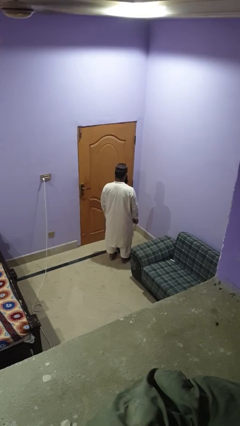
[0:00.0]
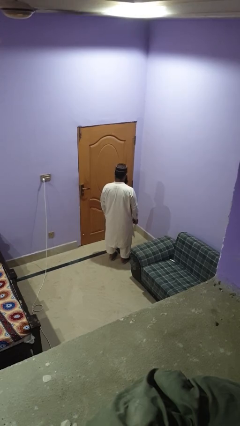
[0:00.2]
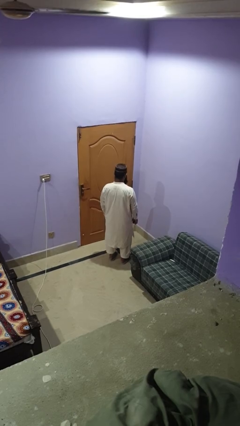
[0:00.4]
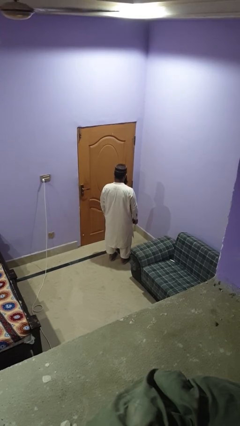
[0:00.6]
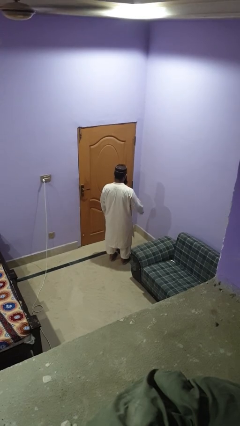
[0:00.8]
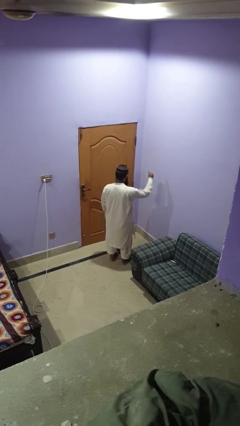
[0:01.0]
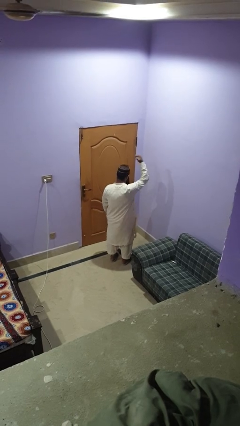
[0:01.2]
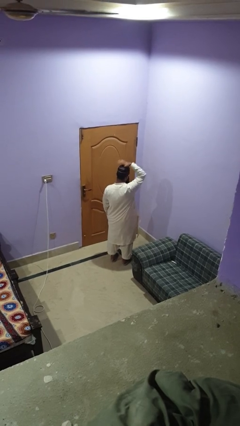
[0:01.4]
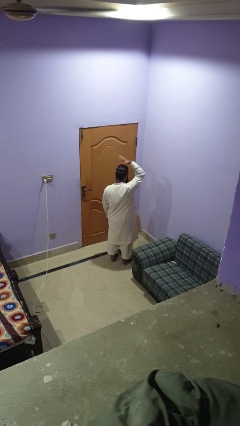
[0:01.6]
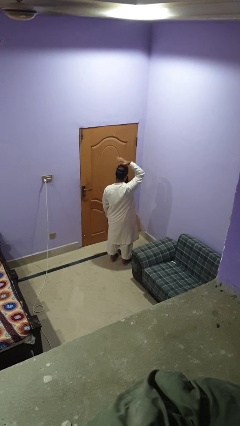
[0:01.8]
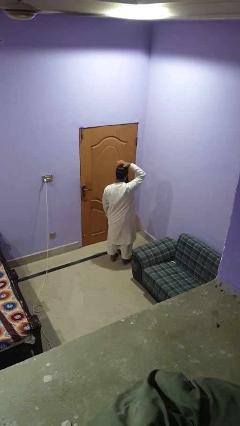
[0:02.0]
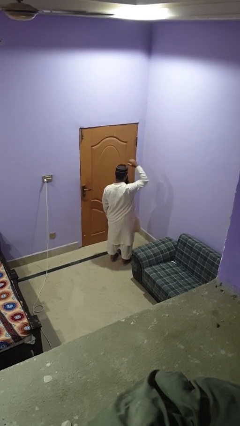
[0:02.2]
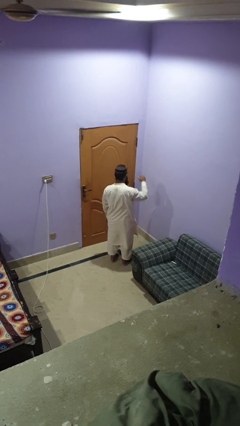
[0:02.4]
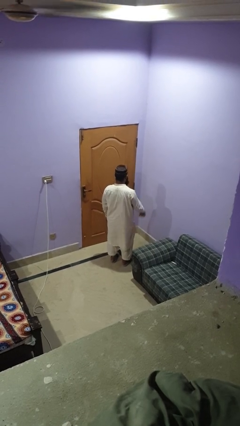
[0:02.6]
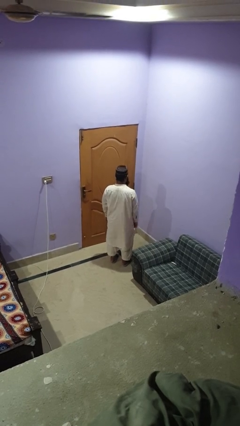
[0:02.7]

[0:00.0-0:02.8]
person pats head

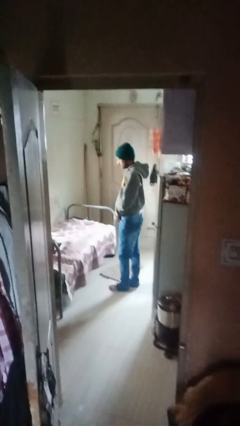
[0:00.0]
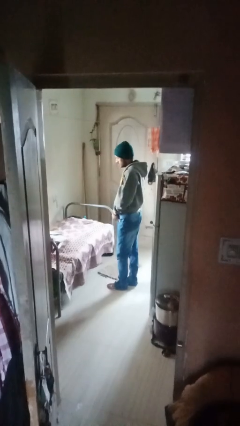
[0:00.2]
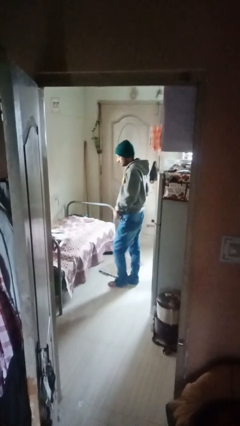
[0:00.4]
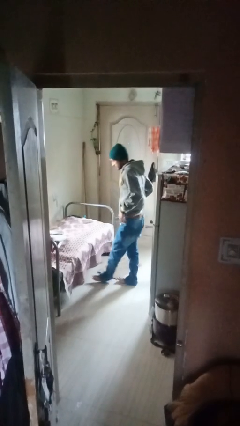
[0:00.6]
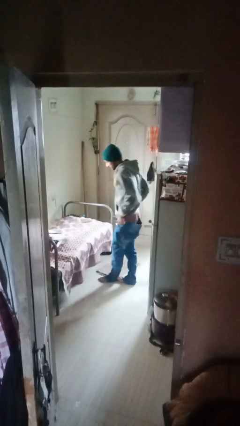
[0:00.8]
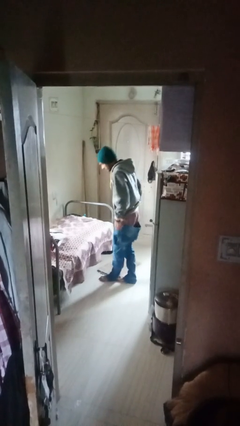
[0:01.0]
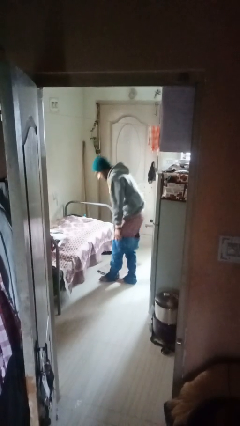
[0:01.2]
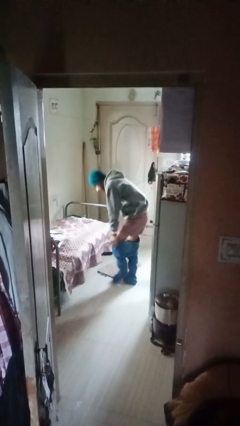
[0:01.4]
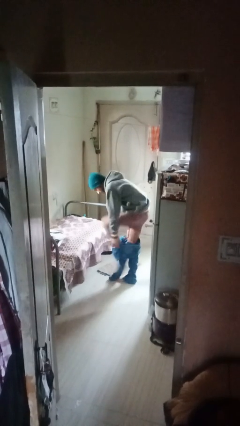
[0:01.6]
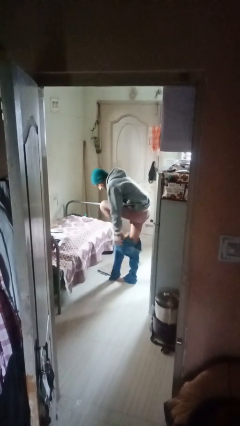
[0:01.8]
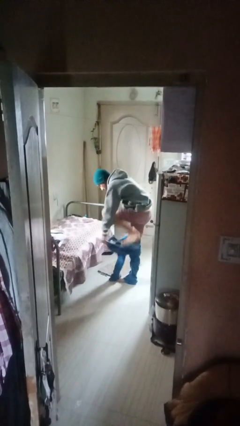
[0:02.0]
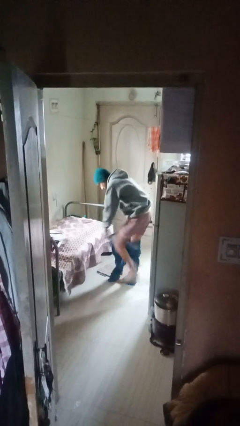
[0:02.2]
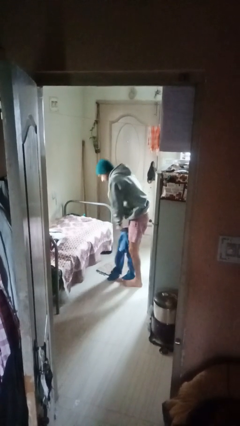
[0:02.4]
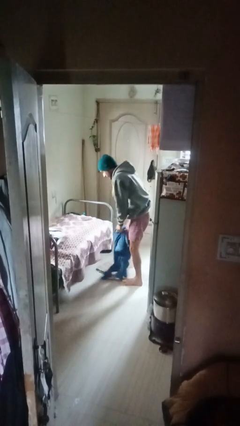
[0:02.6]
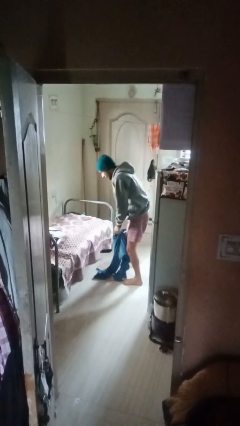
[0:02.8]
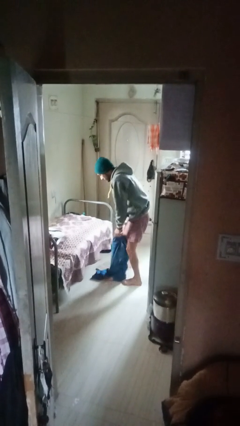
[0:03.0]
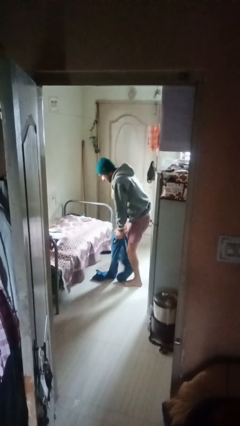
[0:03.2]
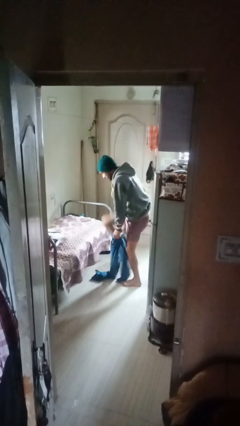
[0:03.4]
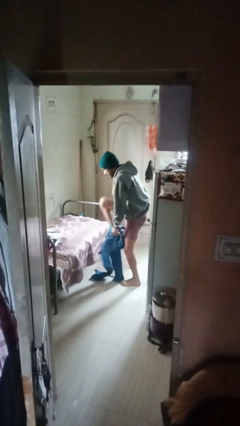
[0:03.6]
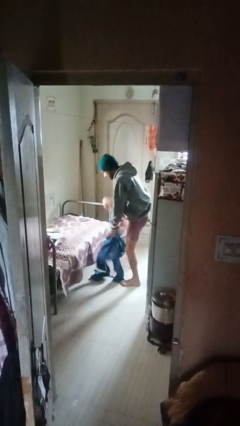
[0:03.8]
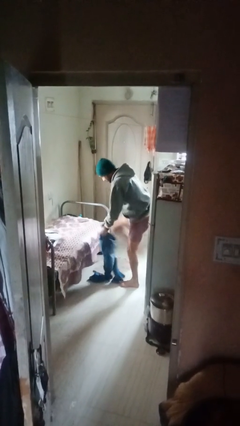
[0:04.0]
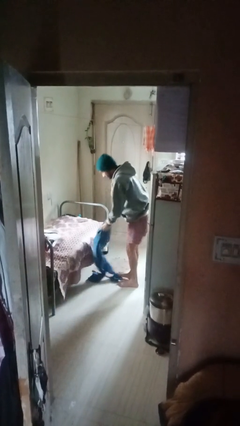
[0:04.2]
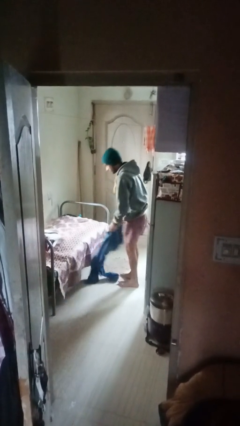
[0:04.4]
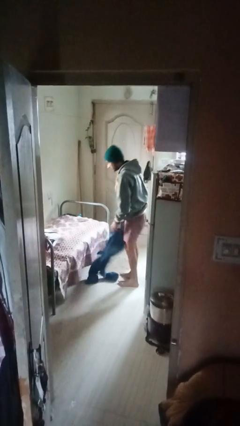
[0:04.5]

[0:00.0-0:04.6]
person takes off pants

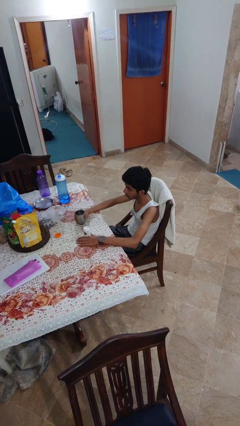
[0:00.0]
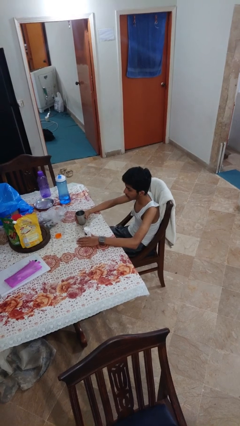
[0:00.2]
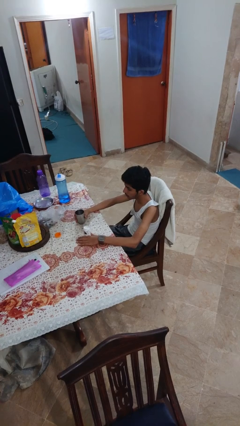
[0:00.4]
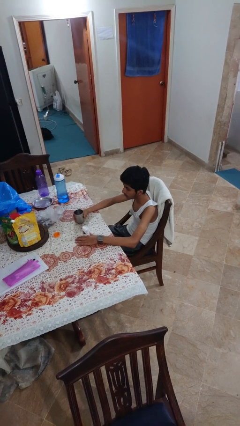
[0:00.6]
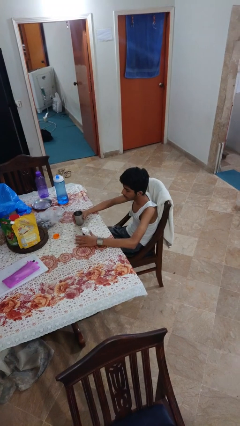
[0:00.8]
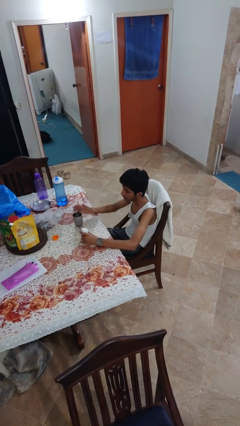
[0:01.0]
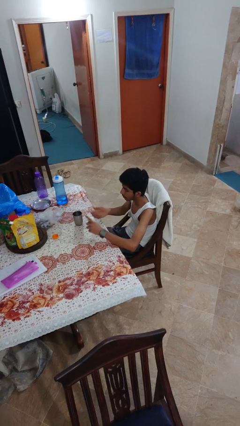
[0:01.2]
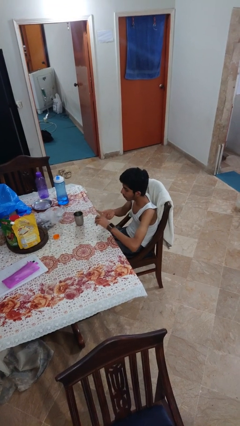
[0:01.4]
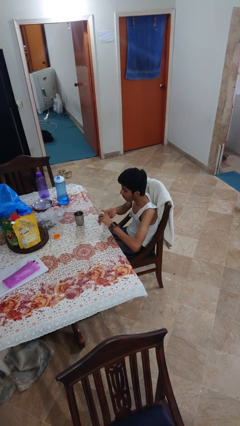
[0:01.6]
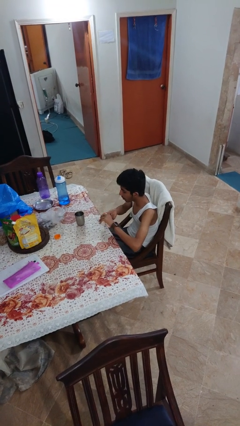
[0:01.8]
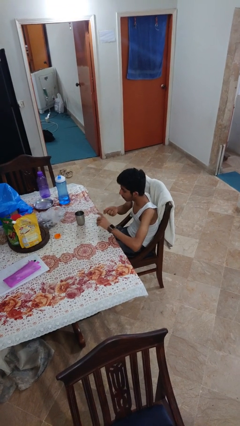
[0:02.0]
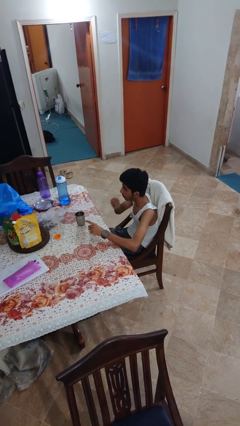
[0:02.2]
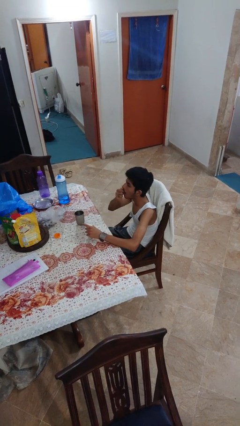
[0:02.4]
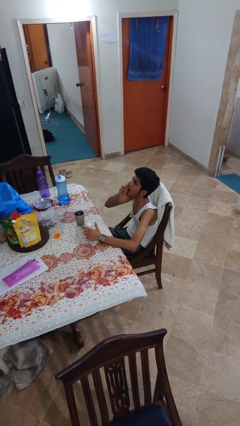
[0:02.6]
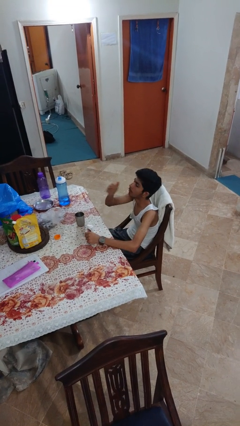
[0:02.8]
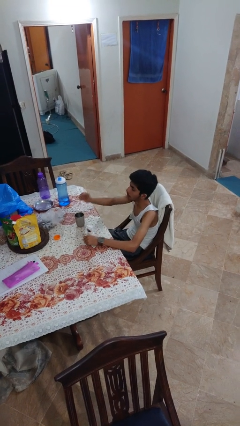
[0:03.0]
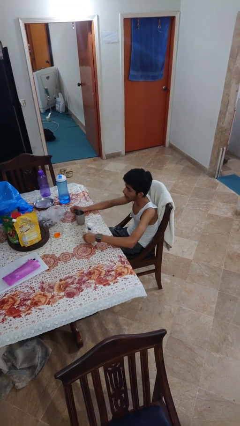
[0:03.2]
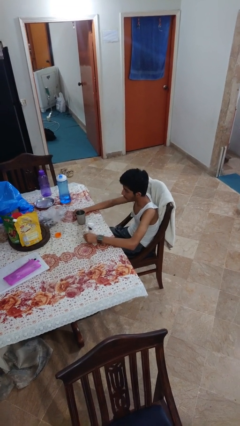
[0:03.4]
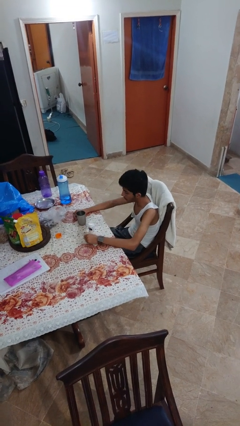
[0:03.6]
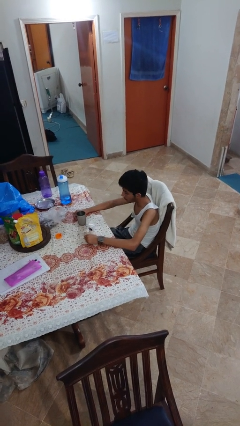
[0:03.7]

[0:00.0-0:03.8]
person takes medicine pills

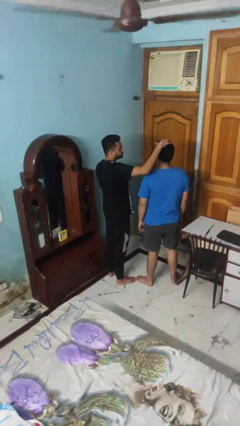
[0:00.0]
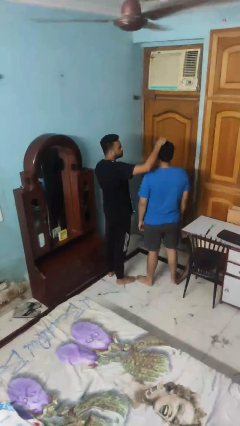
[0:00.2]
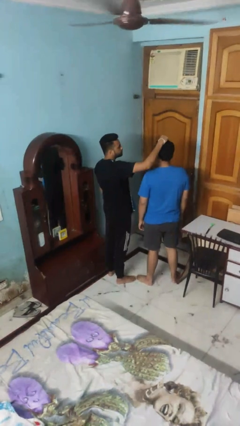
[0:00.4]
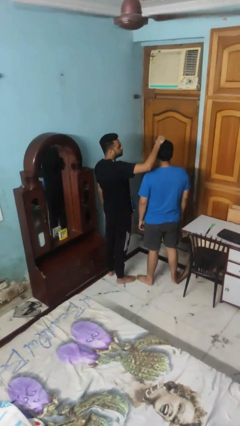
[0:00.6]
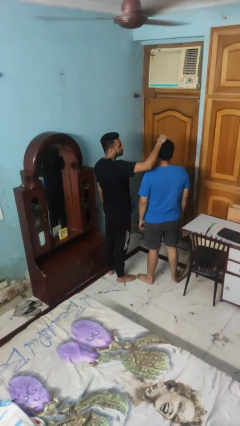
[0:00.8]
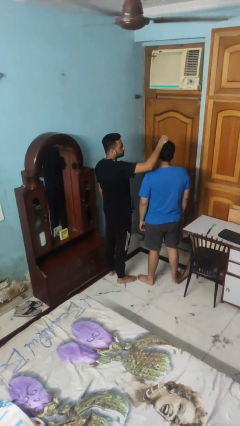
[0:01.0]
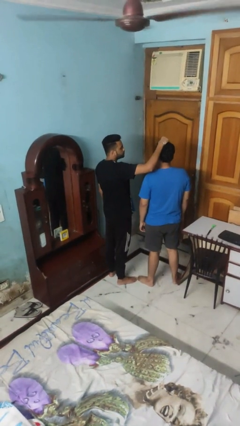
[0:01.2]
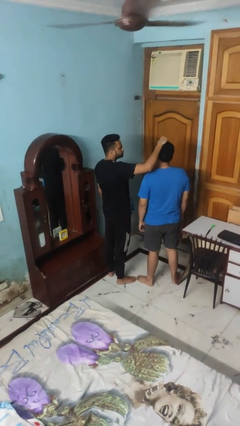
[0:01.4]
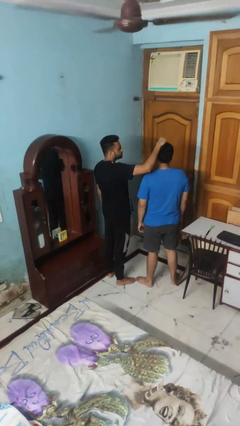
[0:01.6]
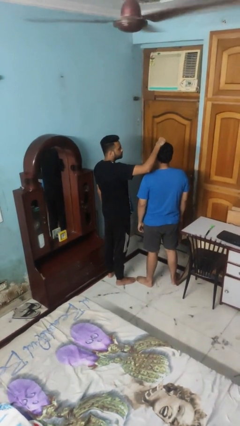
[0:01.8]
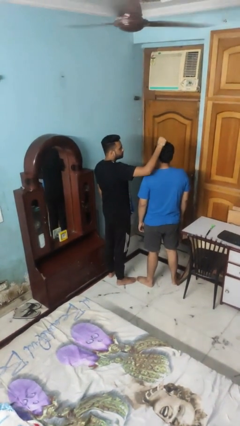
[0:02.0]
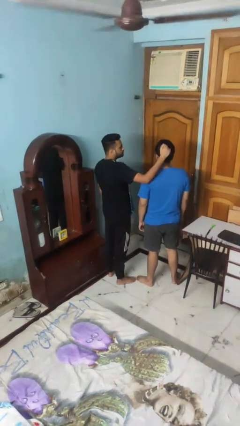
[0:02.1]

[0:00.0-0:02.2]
person grabs person by hair

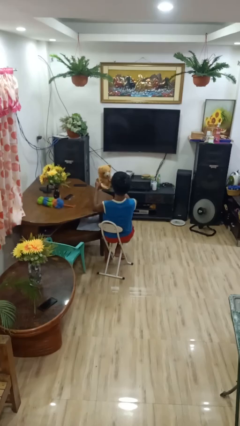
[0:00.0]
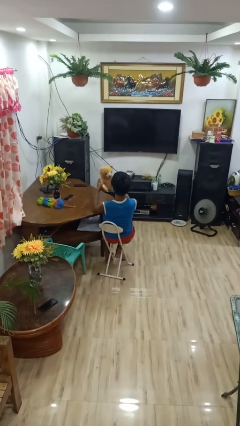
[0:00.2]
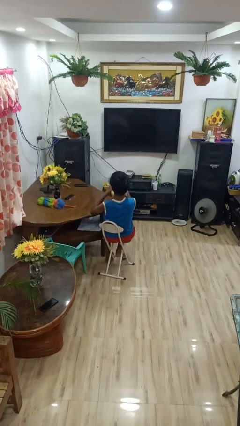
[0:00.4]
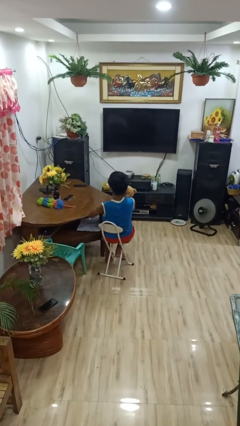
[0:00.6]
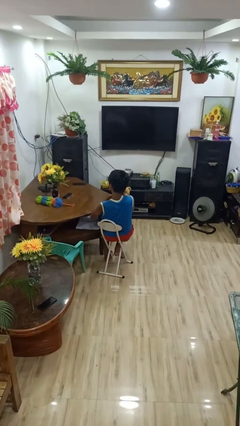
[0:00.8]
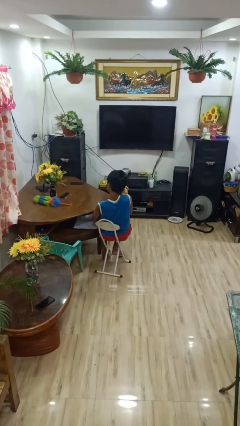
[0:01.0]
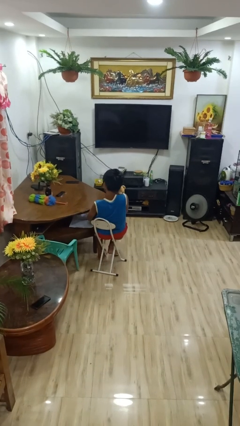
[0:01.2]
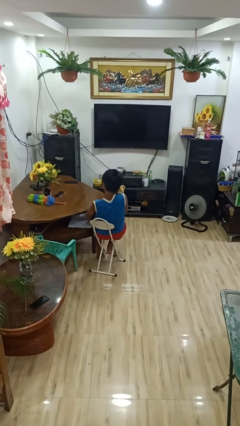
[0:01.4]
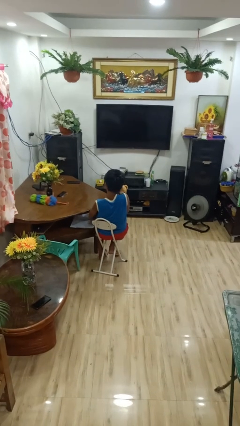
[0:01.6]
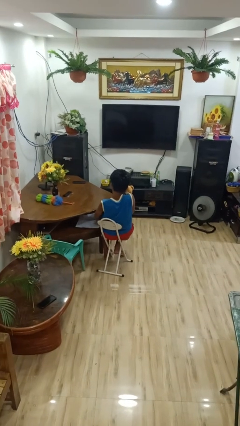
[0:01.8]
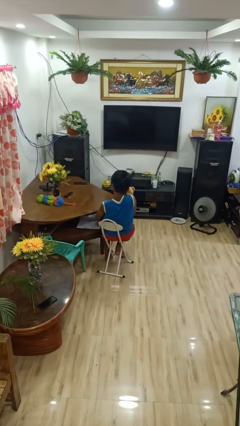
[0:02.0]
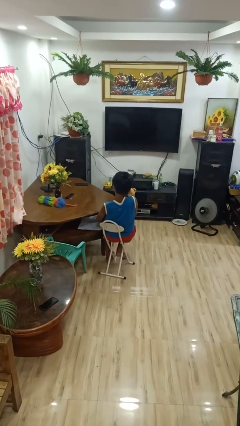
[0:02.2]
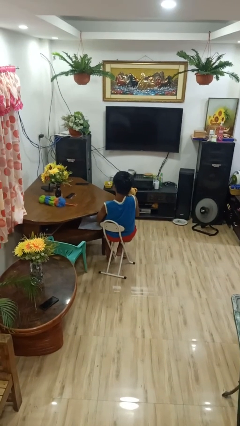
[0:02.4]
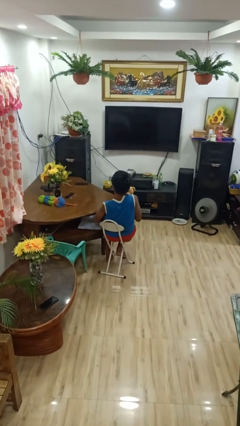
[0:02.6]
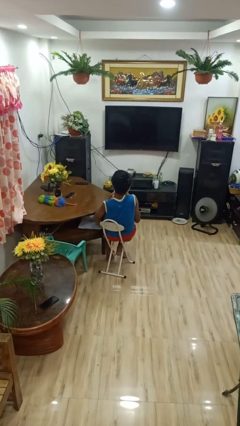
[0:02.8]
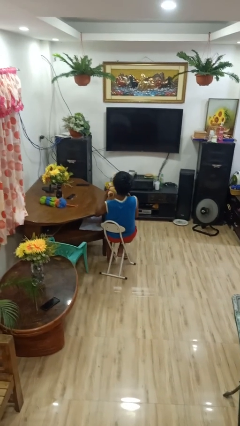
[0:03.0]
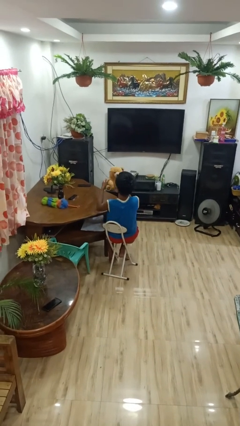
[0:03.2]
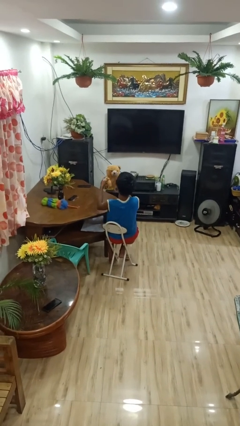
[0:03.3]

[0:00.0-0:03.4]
person hugs stuffed animal

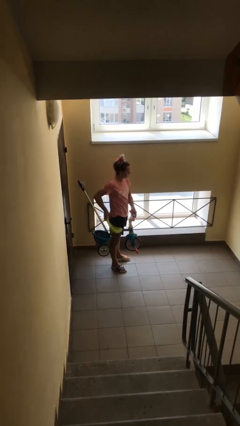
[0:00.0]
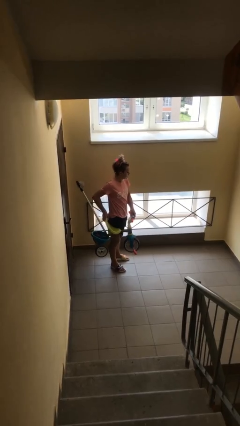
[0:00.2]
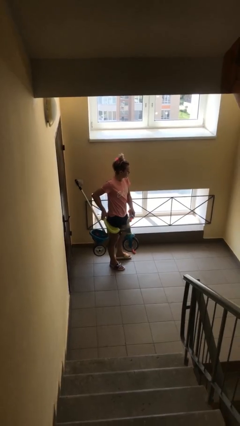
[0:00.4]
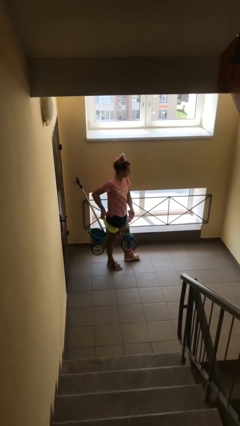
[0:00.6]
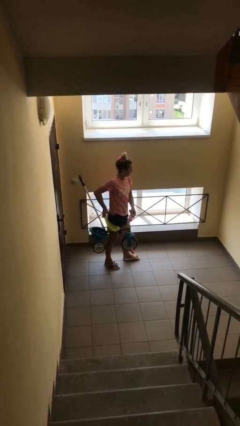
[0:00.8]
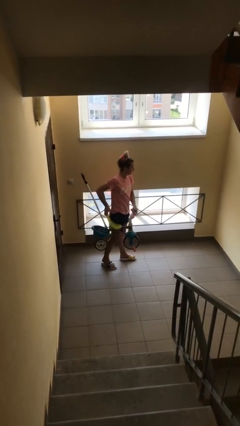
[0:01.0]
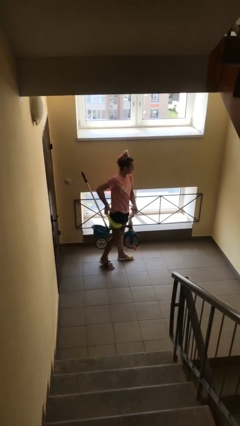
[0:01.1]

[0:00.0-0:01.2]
person carries bicycle
